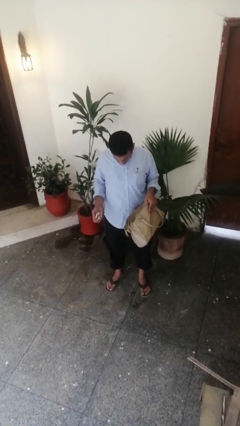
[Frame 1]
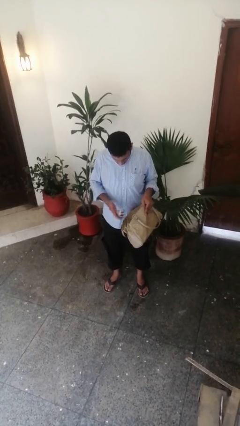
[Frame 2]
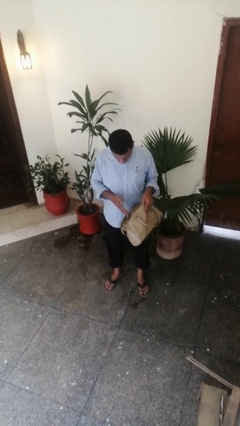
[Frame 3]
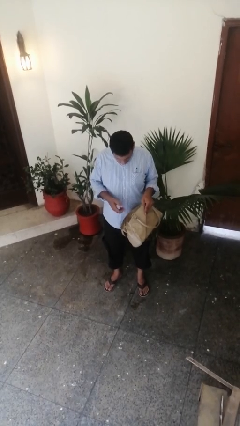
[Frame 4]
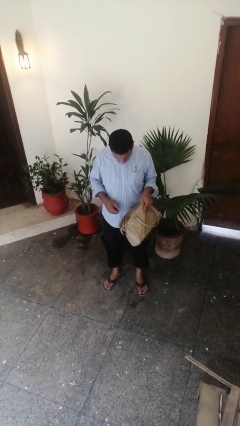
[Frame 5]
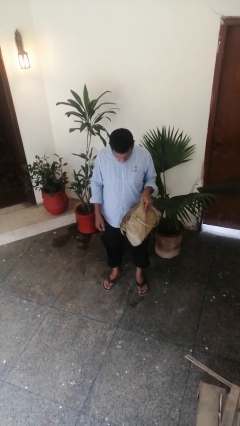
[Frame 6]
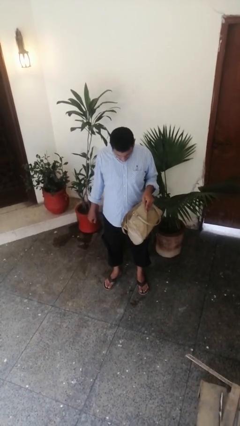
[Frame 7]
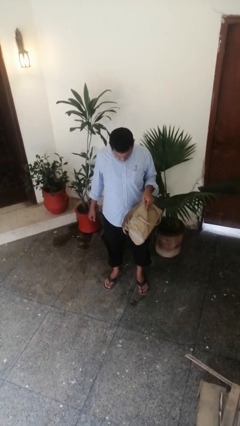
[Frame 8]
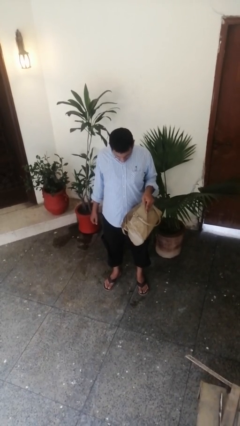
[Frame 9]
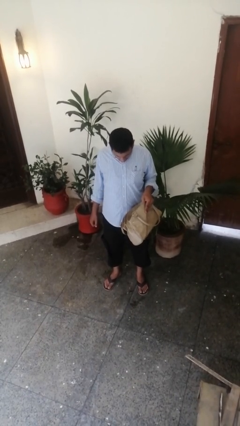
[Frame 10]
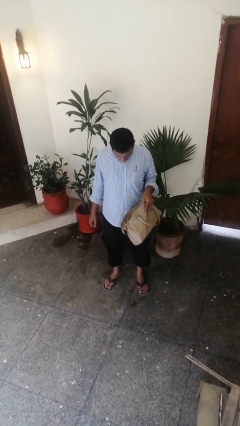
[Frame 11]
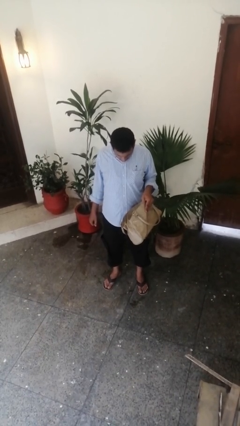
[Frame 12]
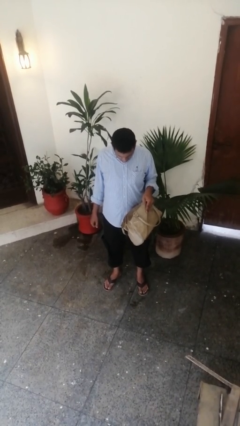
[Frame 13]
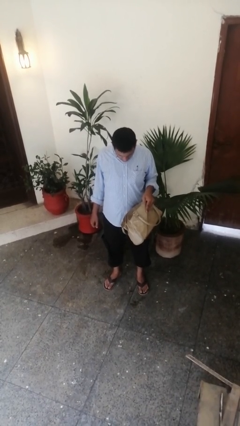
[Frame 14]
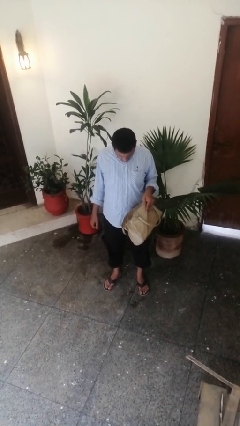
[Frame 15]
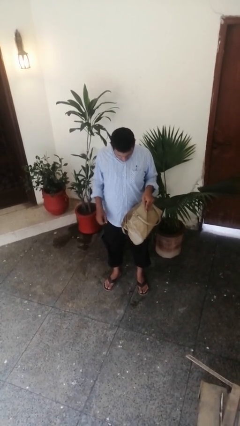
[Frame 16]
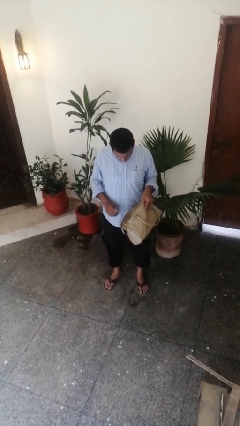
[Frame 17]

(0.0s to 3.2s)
person puts object into purse

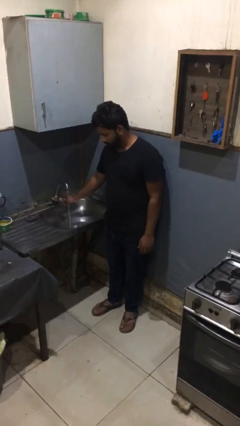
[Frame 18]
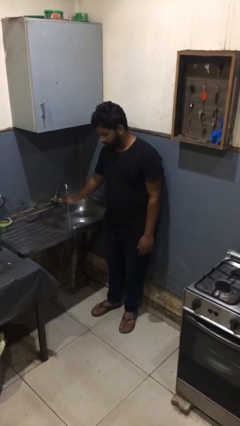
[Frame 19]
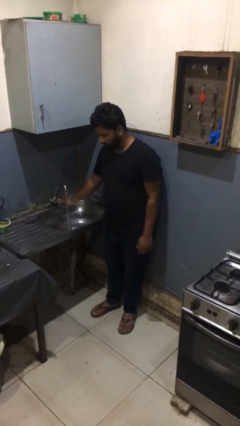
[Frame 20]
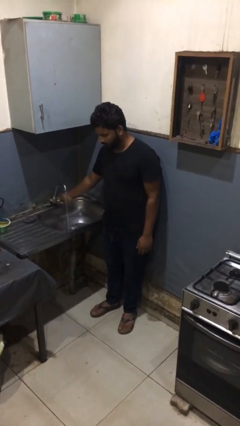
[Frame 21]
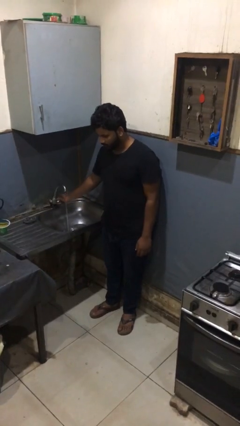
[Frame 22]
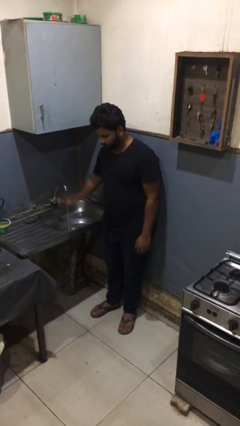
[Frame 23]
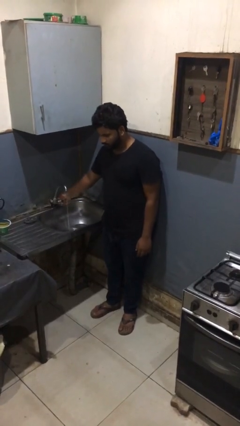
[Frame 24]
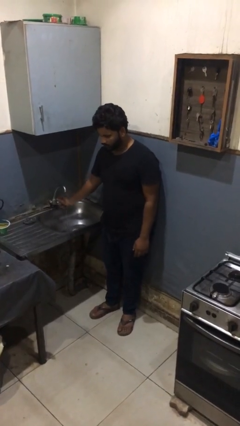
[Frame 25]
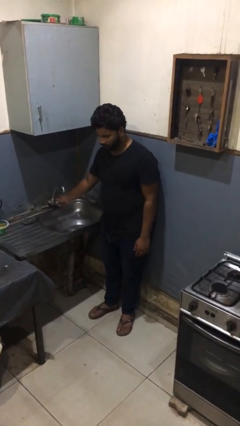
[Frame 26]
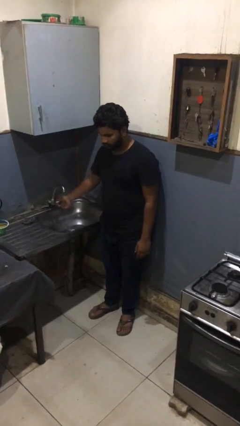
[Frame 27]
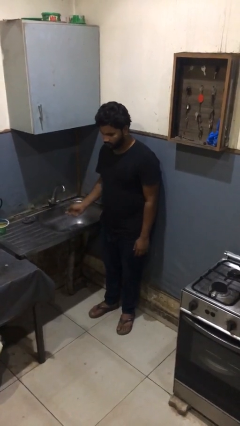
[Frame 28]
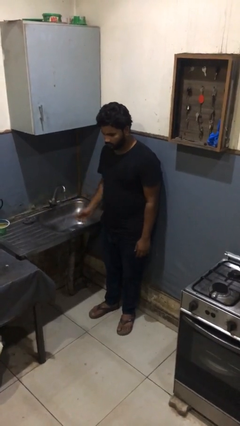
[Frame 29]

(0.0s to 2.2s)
person turns off faucet

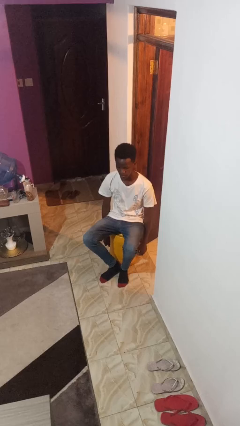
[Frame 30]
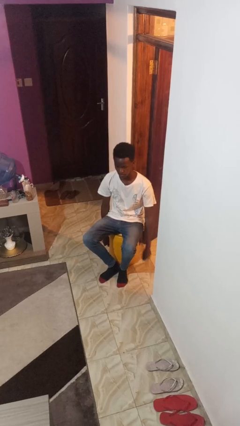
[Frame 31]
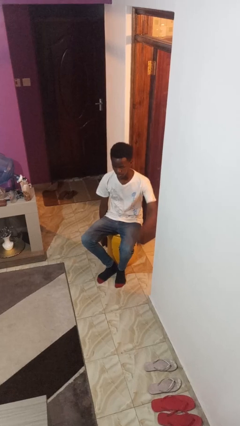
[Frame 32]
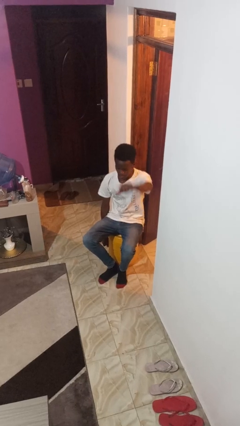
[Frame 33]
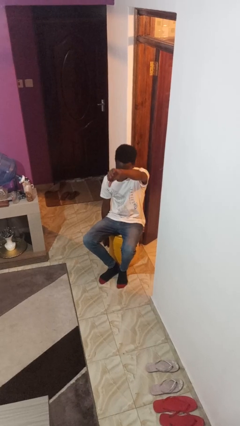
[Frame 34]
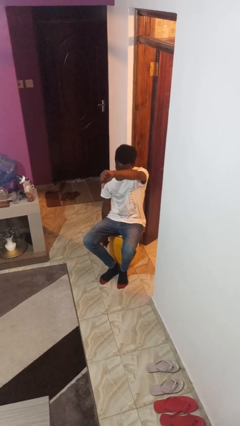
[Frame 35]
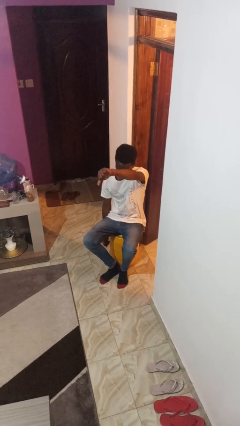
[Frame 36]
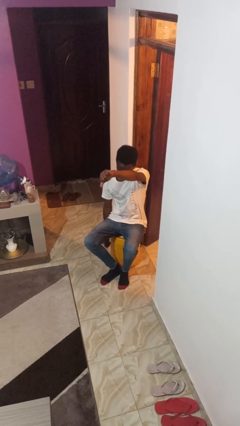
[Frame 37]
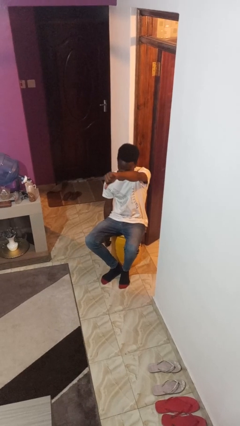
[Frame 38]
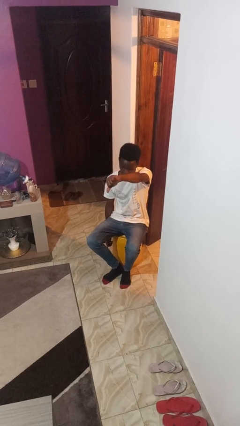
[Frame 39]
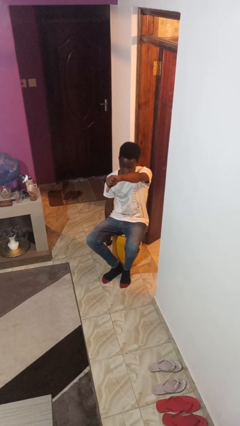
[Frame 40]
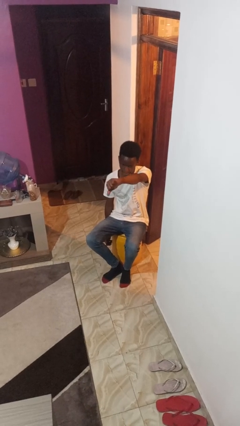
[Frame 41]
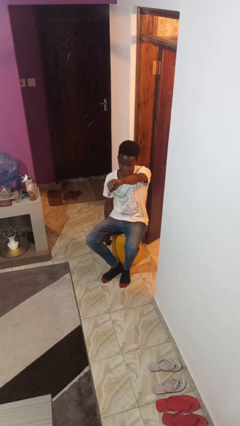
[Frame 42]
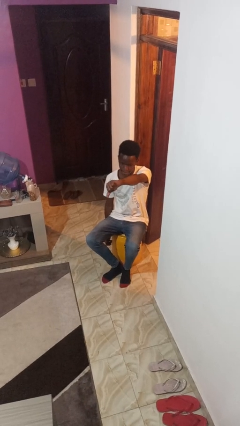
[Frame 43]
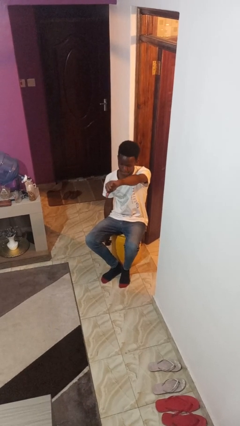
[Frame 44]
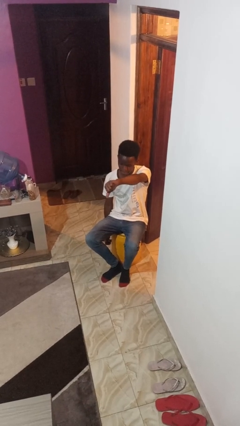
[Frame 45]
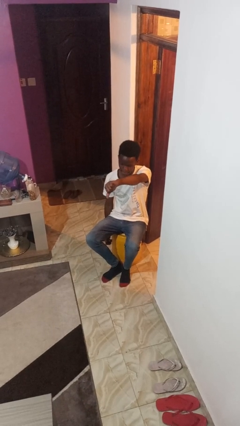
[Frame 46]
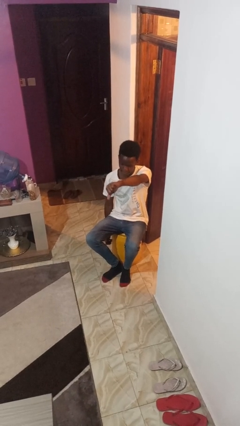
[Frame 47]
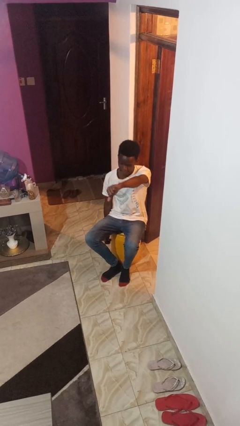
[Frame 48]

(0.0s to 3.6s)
person gestures thumbs down

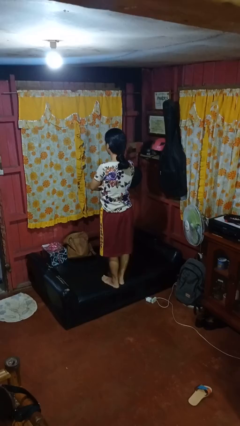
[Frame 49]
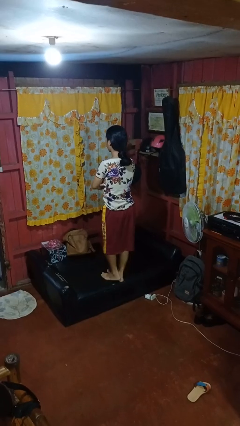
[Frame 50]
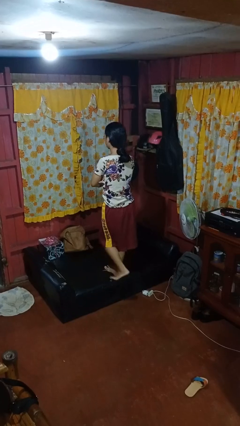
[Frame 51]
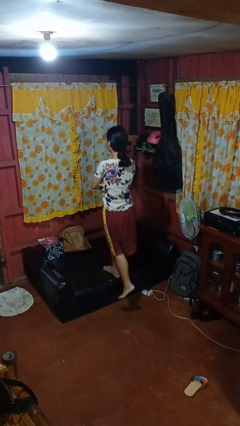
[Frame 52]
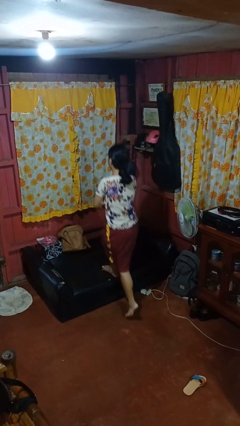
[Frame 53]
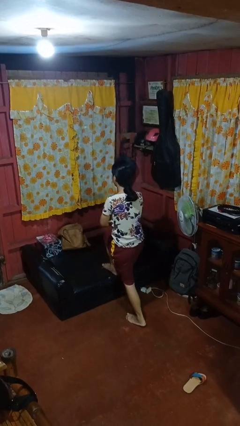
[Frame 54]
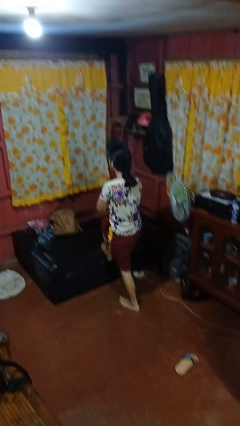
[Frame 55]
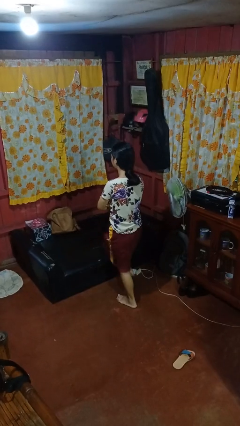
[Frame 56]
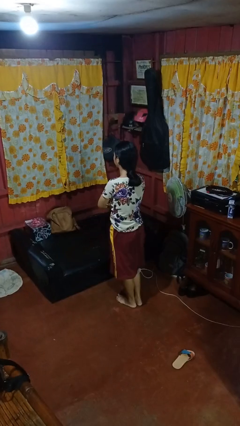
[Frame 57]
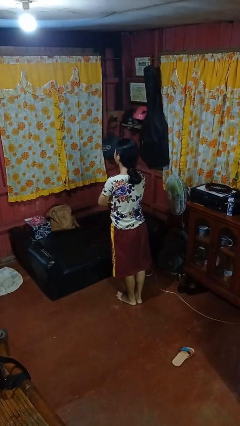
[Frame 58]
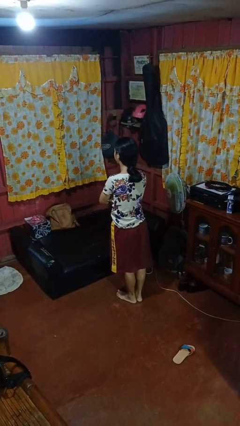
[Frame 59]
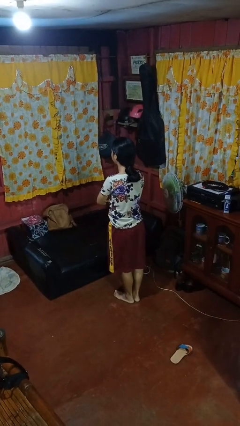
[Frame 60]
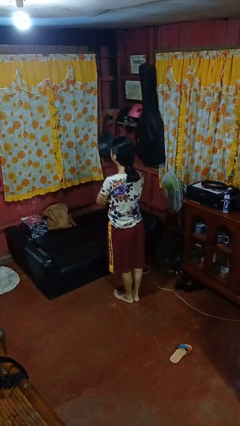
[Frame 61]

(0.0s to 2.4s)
person climbs off couch

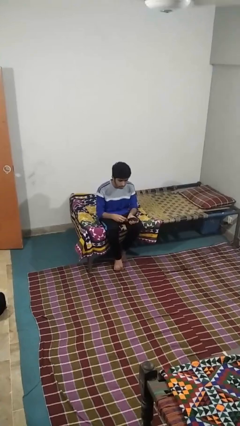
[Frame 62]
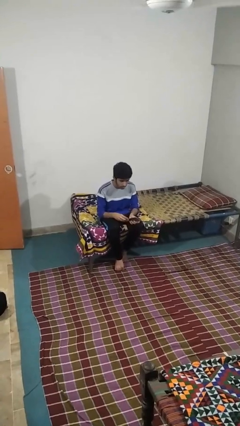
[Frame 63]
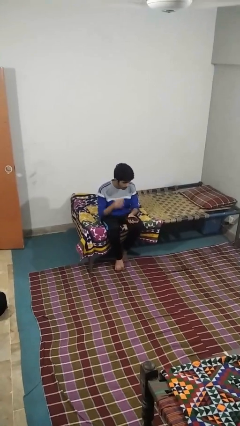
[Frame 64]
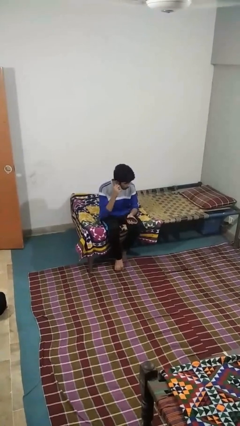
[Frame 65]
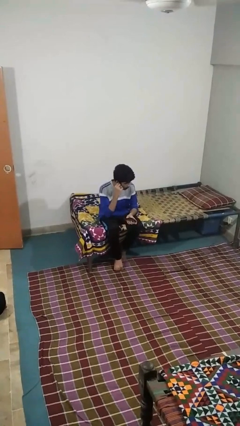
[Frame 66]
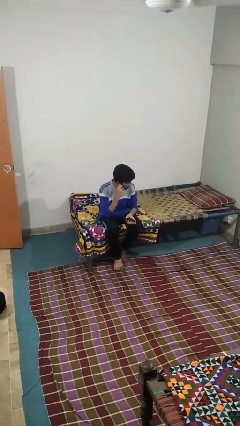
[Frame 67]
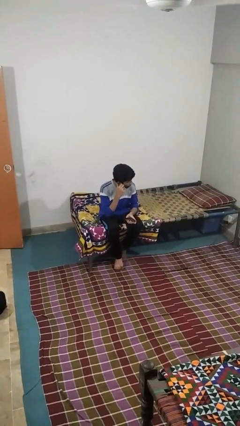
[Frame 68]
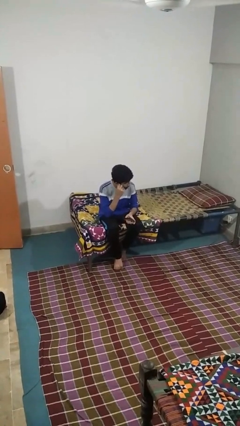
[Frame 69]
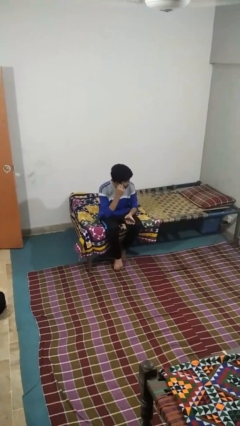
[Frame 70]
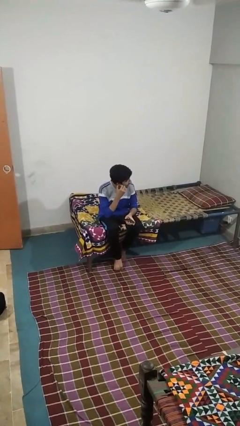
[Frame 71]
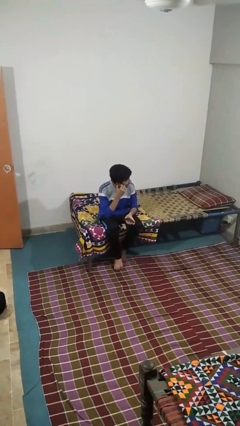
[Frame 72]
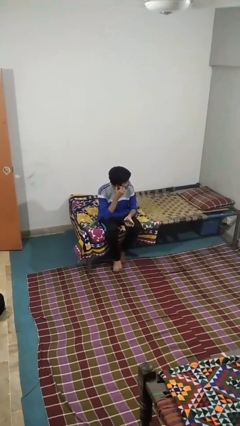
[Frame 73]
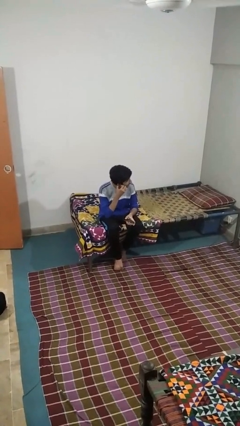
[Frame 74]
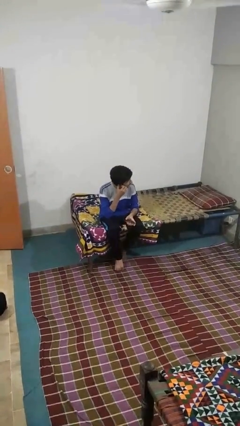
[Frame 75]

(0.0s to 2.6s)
person touches earlobe

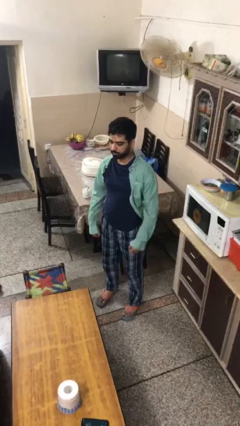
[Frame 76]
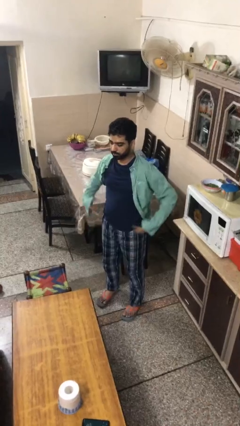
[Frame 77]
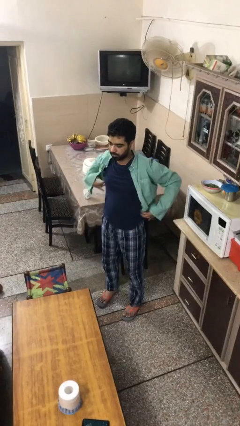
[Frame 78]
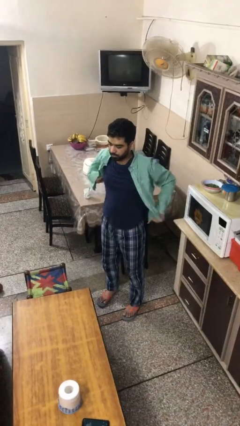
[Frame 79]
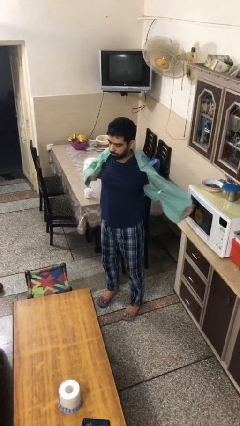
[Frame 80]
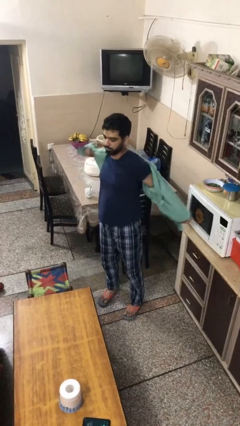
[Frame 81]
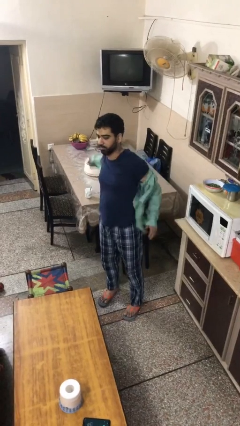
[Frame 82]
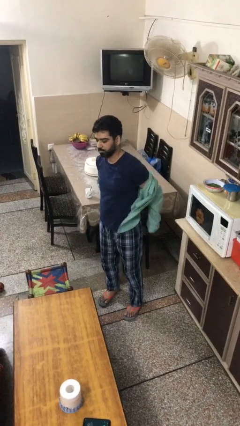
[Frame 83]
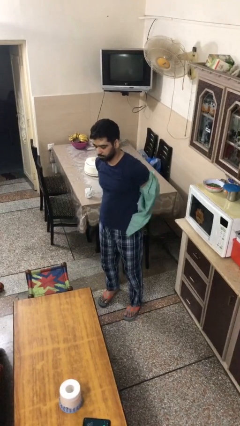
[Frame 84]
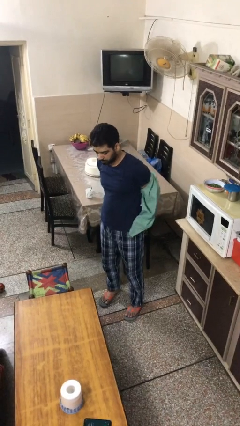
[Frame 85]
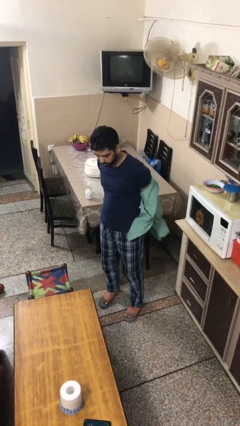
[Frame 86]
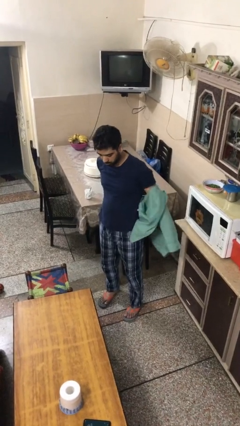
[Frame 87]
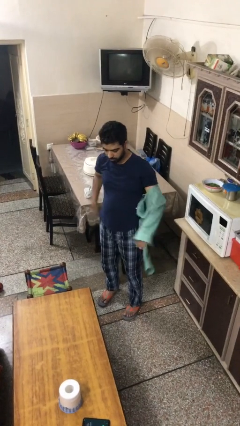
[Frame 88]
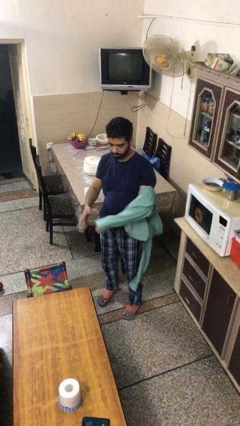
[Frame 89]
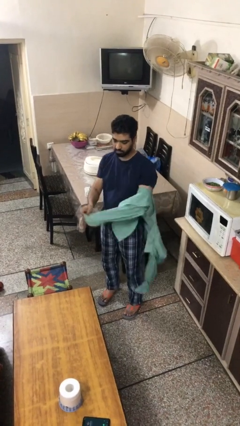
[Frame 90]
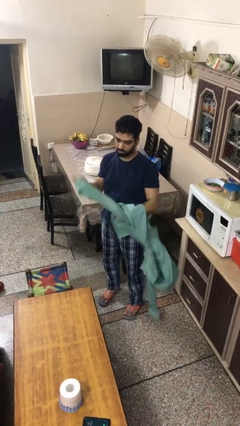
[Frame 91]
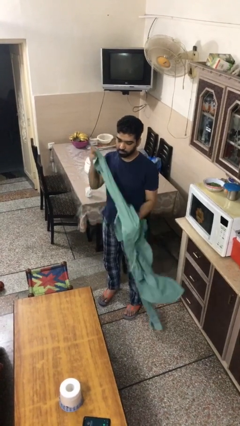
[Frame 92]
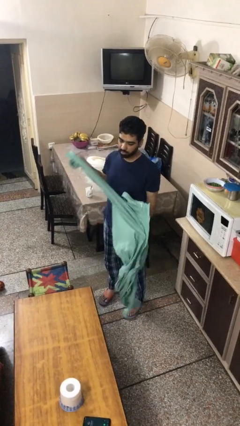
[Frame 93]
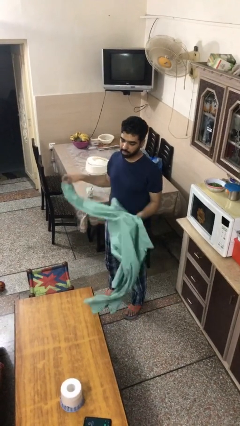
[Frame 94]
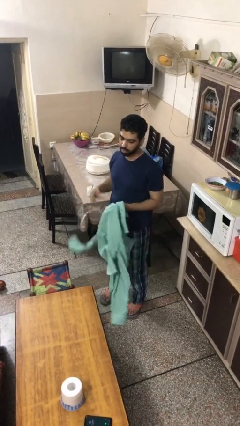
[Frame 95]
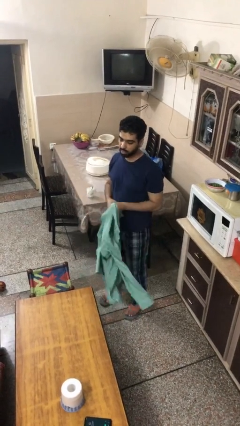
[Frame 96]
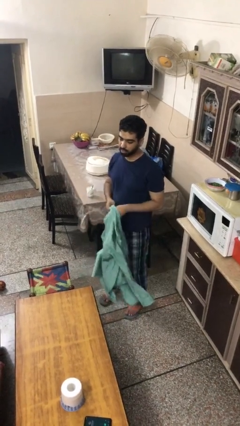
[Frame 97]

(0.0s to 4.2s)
person takes off shirt
